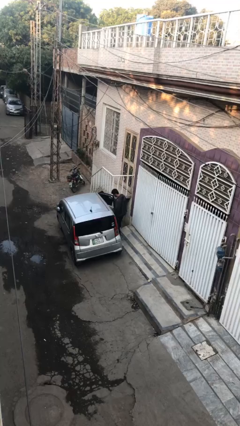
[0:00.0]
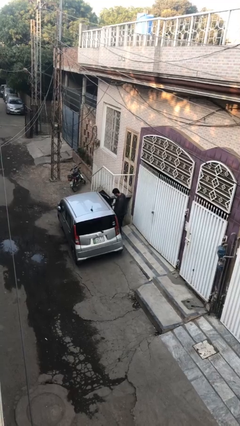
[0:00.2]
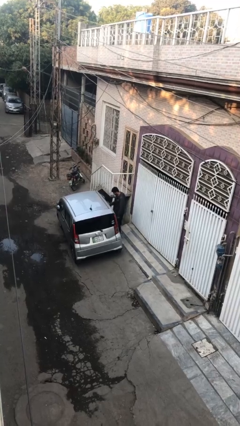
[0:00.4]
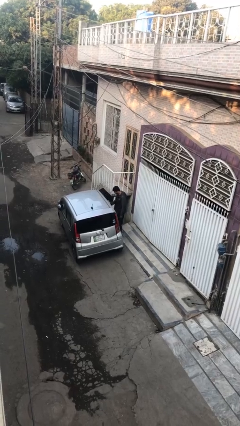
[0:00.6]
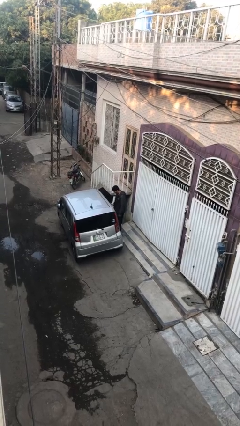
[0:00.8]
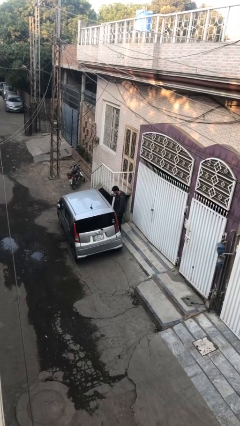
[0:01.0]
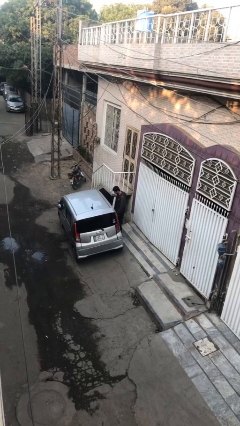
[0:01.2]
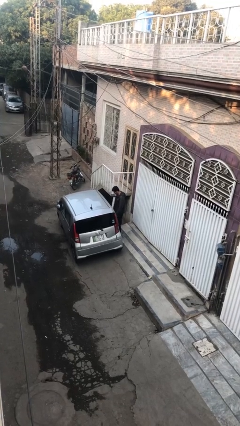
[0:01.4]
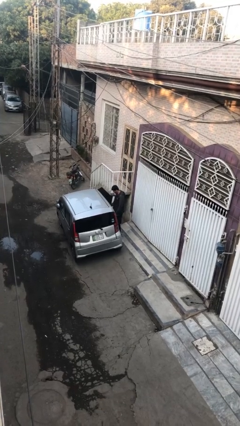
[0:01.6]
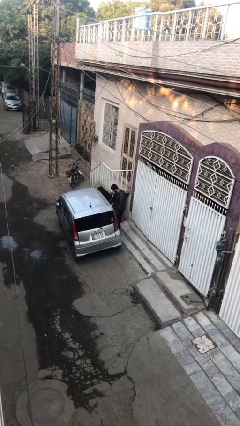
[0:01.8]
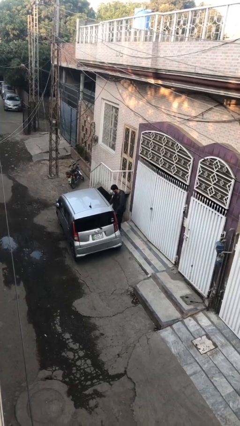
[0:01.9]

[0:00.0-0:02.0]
person closes car door

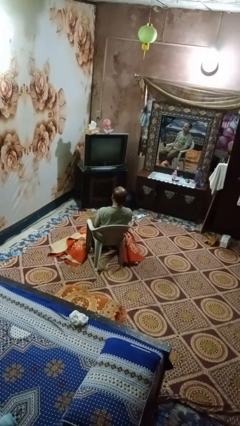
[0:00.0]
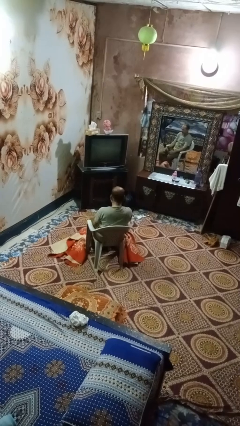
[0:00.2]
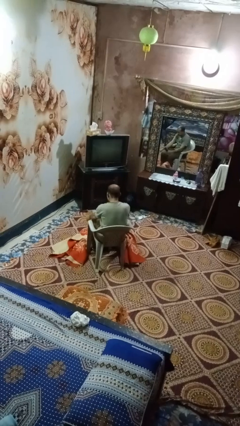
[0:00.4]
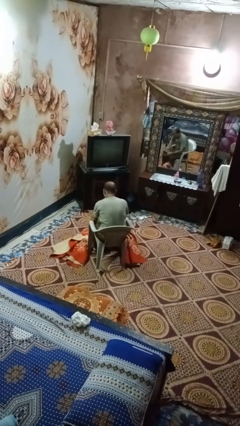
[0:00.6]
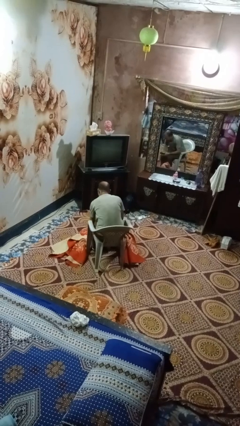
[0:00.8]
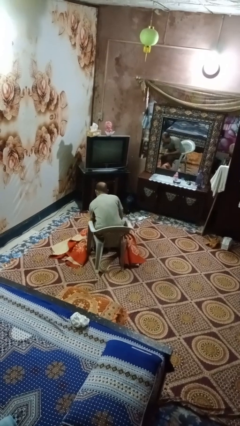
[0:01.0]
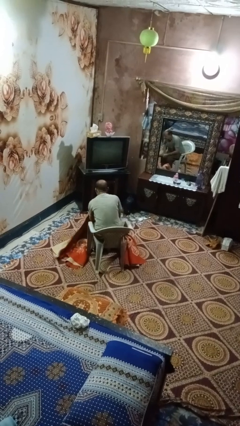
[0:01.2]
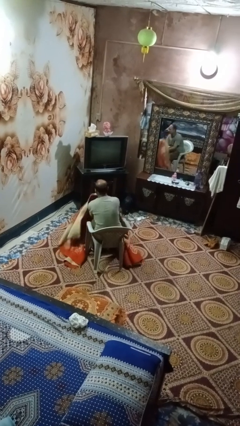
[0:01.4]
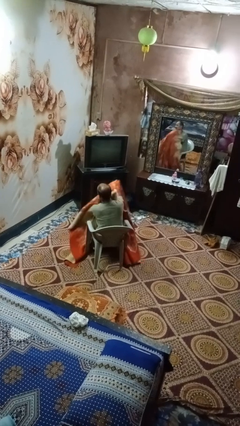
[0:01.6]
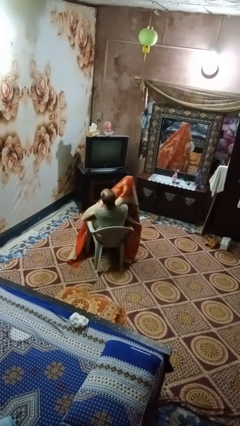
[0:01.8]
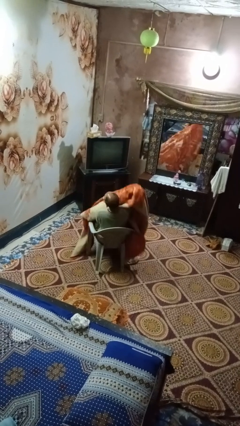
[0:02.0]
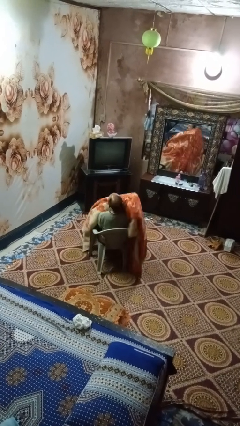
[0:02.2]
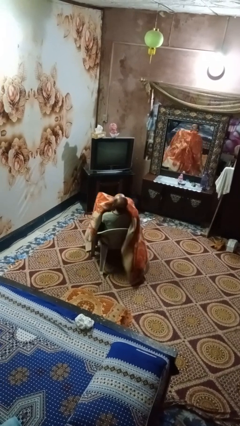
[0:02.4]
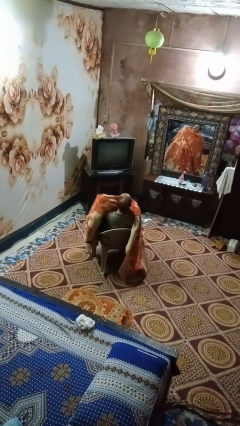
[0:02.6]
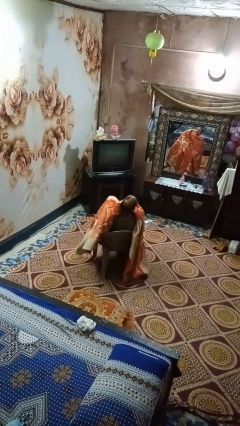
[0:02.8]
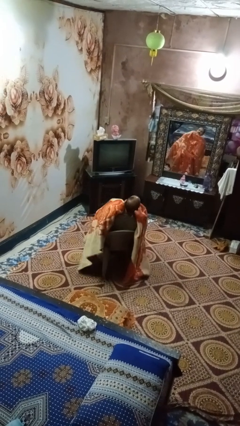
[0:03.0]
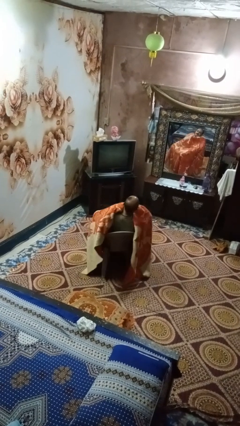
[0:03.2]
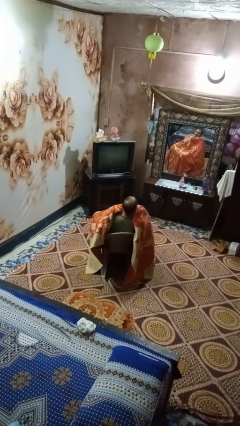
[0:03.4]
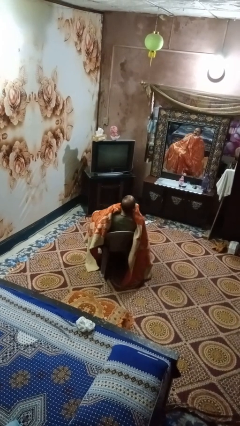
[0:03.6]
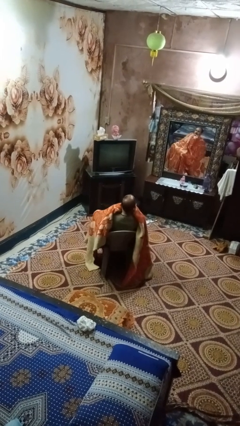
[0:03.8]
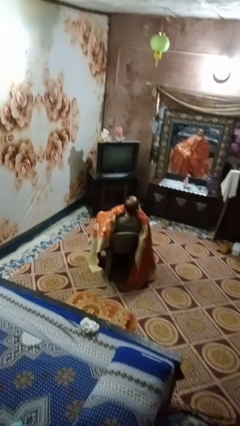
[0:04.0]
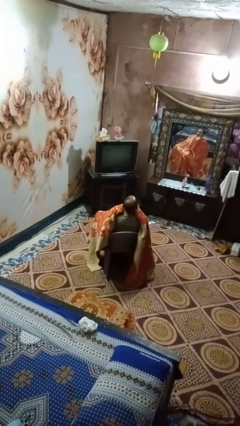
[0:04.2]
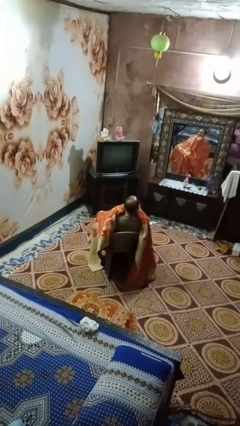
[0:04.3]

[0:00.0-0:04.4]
person covers with blanket

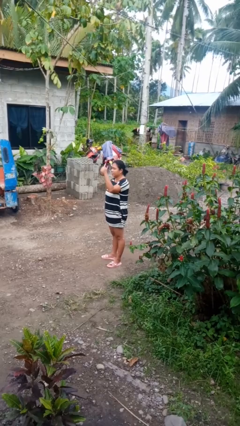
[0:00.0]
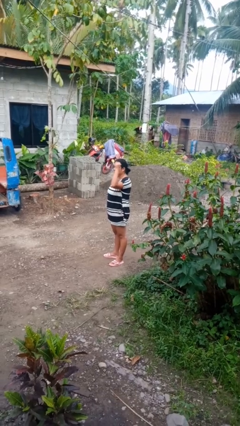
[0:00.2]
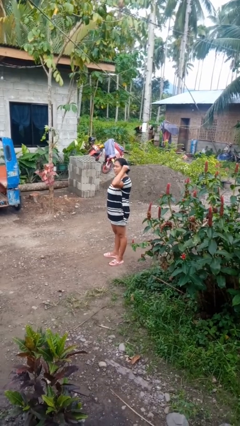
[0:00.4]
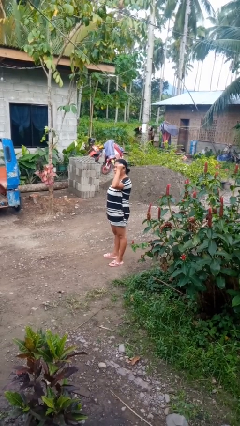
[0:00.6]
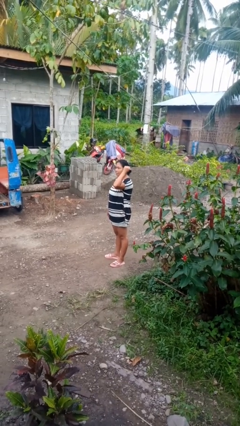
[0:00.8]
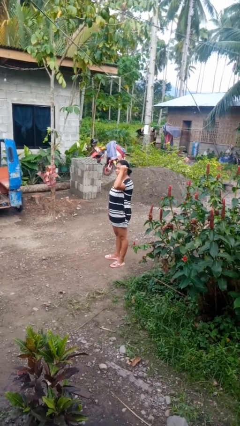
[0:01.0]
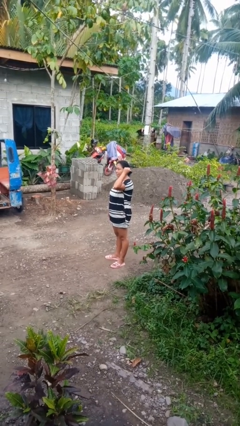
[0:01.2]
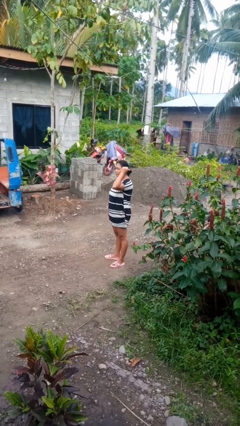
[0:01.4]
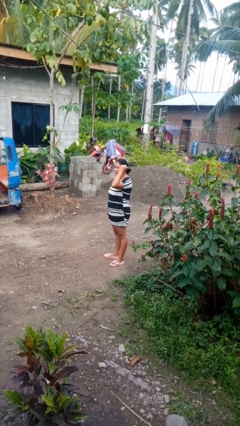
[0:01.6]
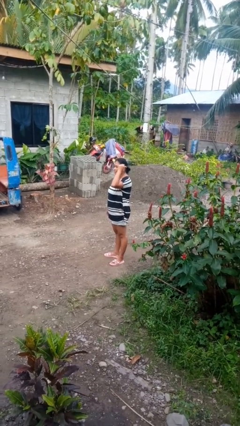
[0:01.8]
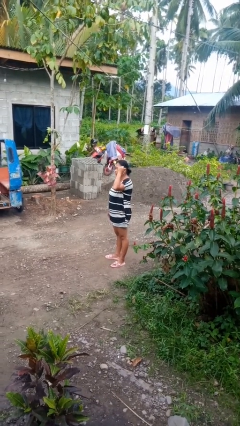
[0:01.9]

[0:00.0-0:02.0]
person gestures behind me

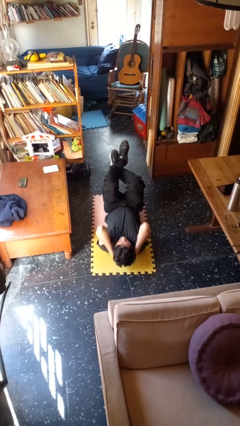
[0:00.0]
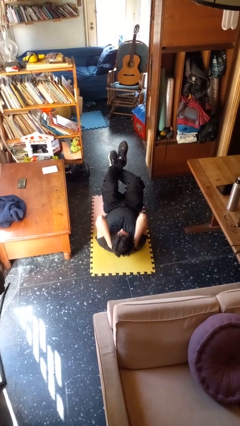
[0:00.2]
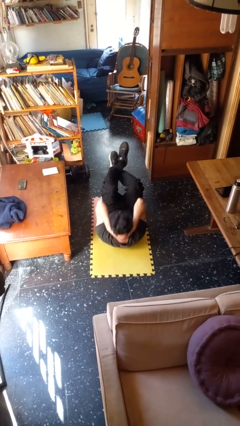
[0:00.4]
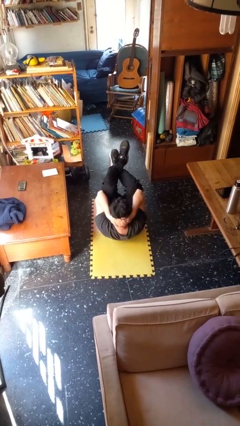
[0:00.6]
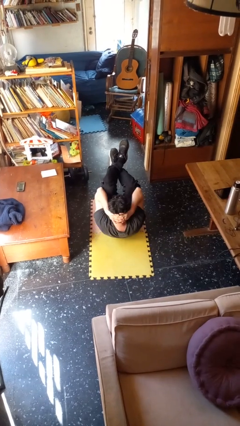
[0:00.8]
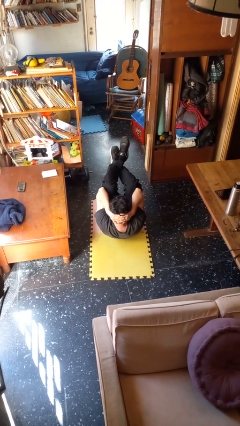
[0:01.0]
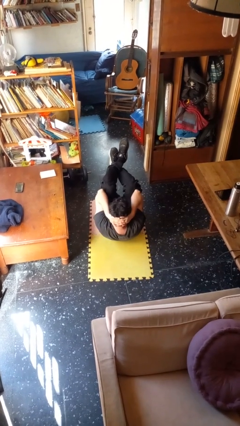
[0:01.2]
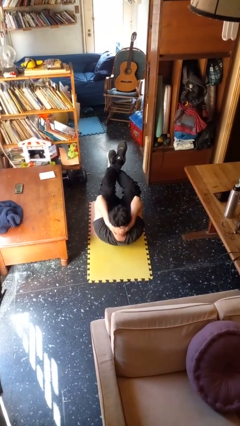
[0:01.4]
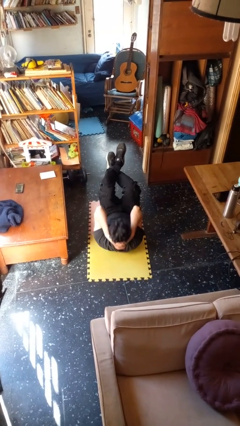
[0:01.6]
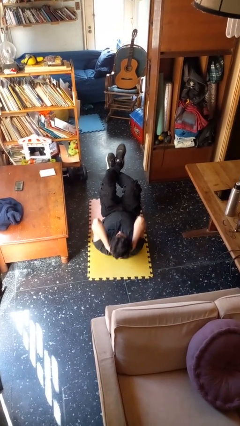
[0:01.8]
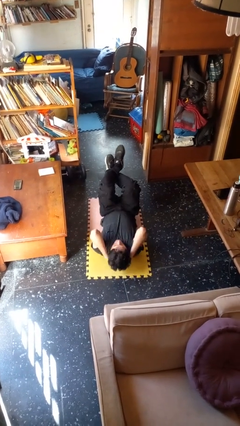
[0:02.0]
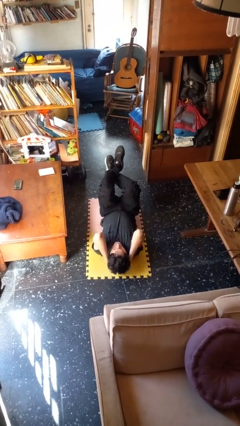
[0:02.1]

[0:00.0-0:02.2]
person exercises with situp

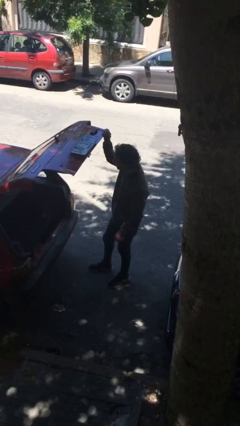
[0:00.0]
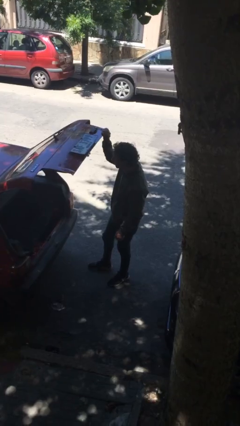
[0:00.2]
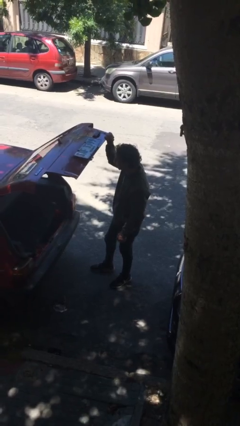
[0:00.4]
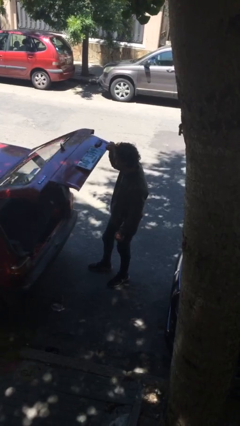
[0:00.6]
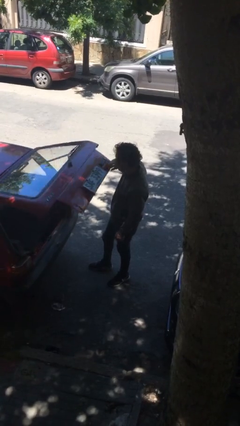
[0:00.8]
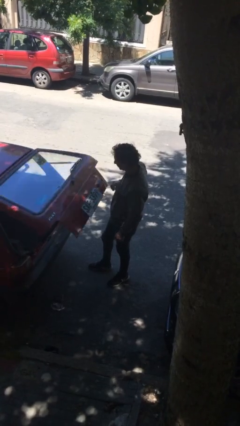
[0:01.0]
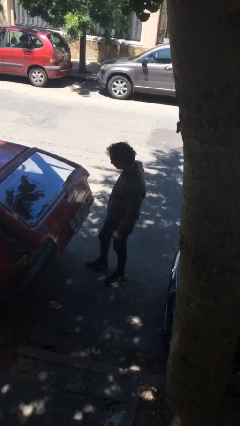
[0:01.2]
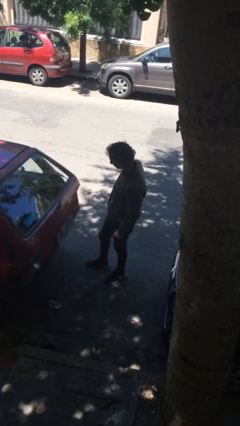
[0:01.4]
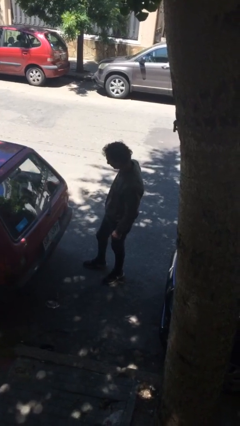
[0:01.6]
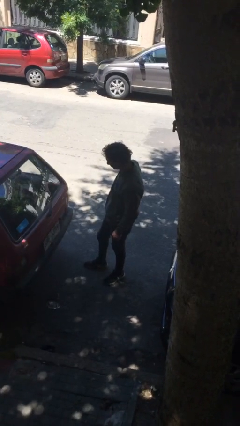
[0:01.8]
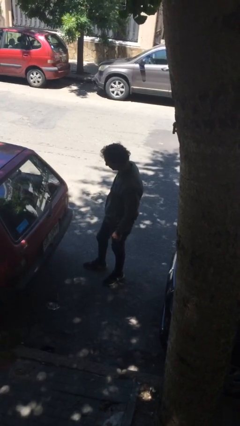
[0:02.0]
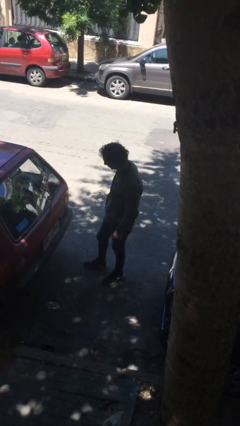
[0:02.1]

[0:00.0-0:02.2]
person closes car trunk

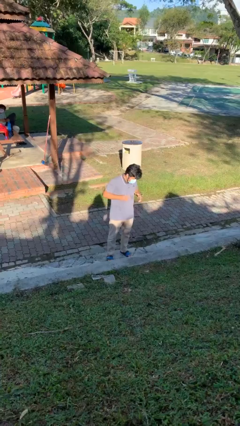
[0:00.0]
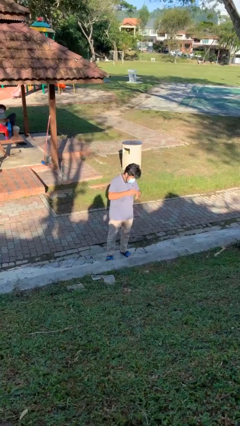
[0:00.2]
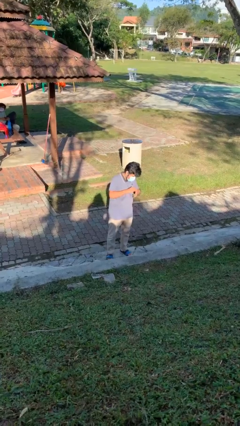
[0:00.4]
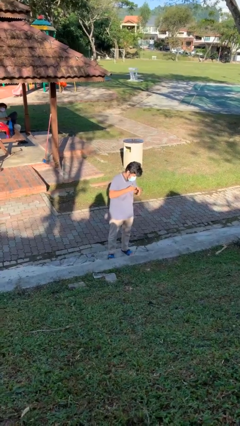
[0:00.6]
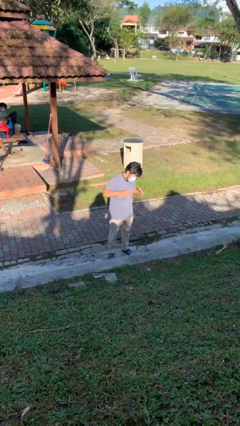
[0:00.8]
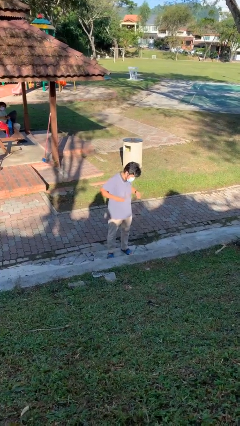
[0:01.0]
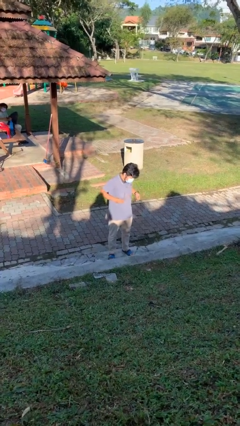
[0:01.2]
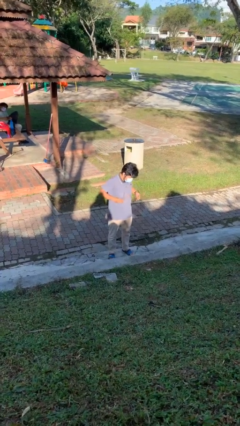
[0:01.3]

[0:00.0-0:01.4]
person takes off ring

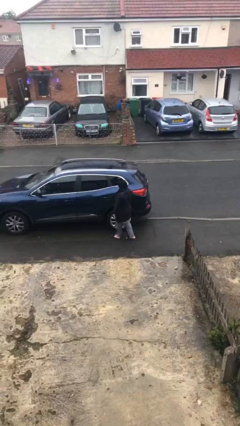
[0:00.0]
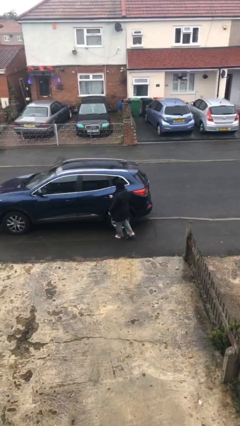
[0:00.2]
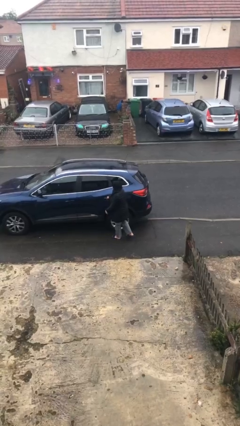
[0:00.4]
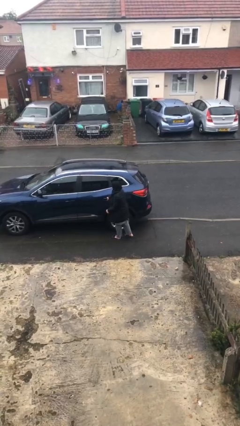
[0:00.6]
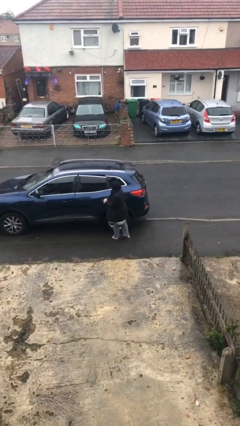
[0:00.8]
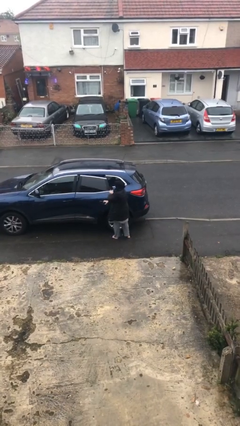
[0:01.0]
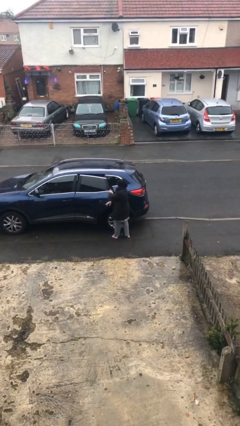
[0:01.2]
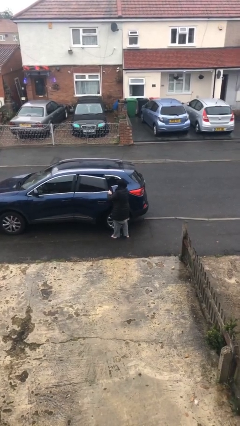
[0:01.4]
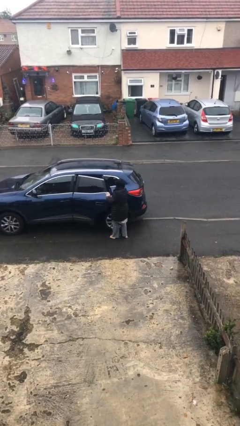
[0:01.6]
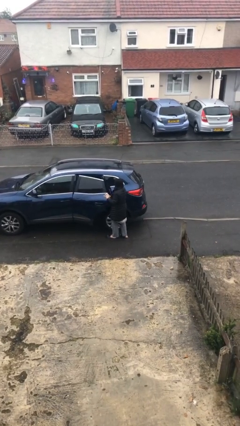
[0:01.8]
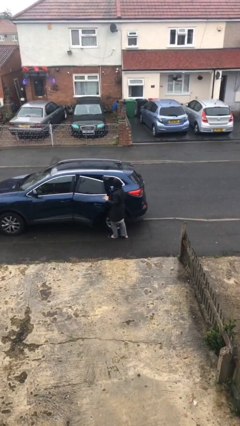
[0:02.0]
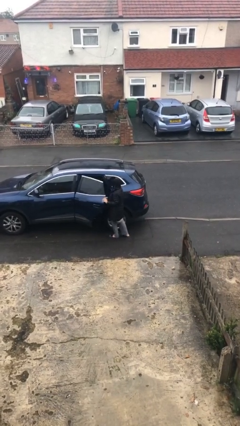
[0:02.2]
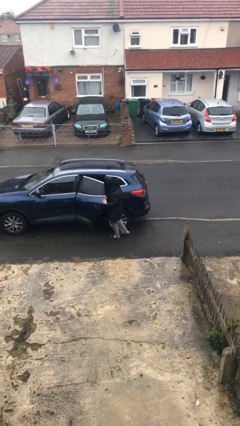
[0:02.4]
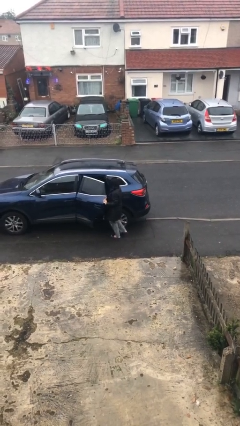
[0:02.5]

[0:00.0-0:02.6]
person opens car door
